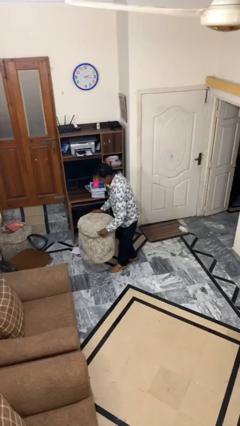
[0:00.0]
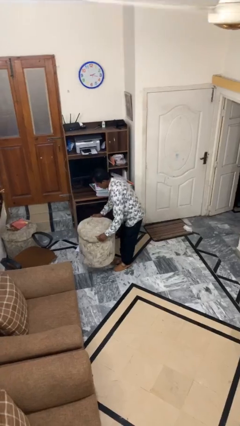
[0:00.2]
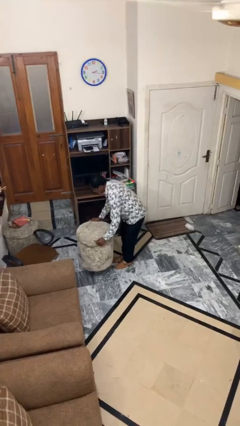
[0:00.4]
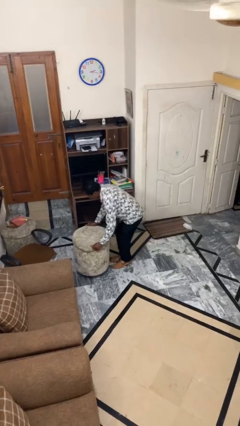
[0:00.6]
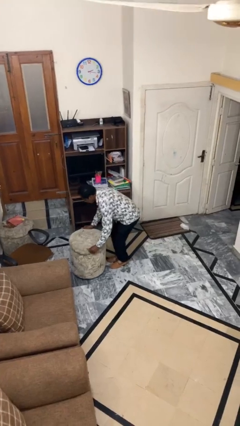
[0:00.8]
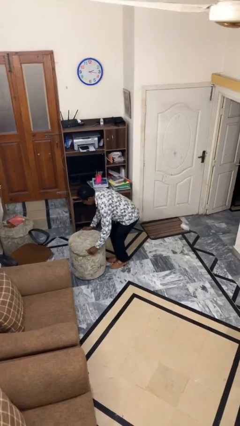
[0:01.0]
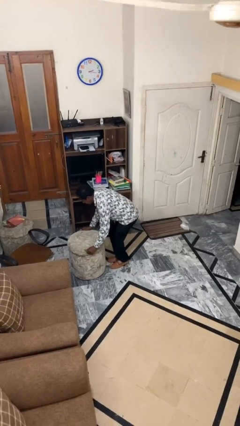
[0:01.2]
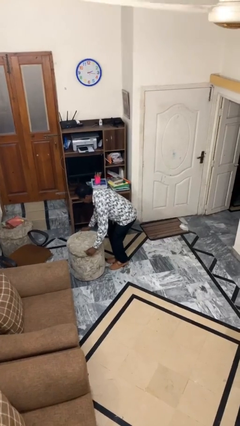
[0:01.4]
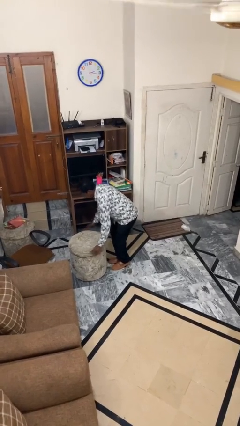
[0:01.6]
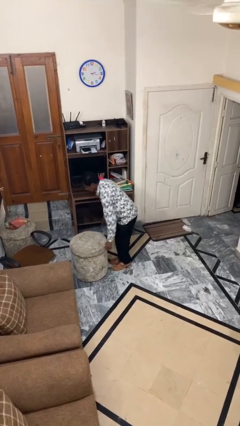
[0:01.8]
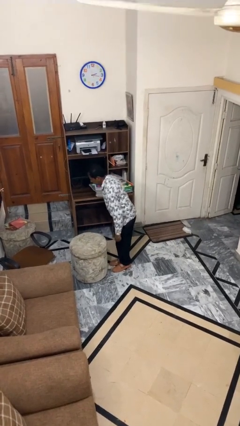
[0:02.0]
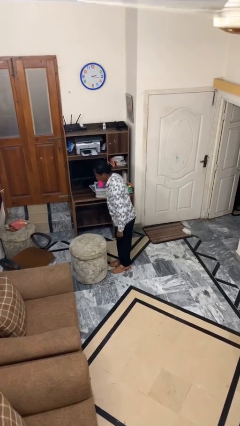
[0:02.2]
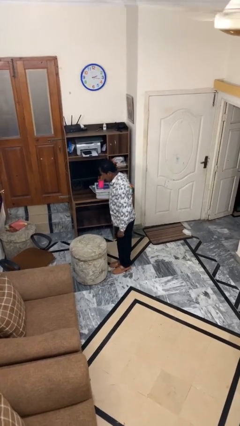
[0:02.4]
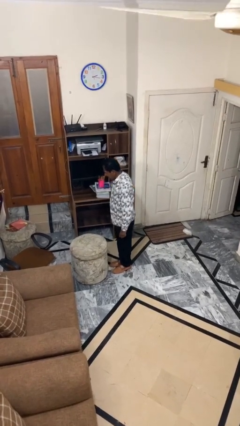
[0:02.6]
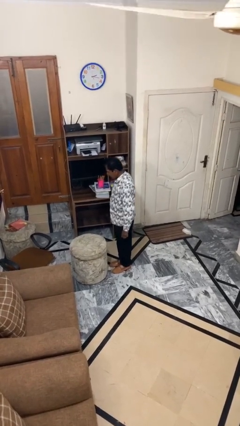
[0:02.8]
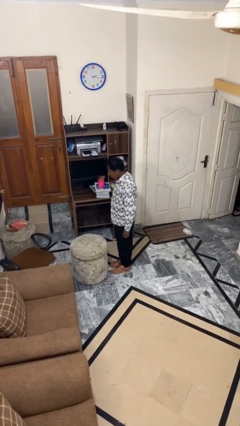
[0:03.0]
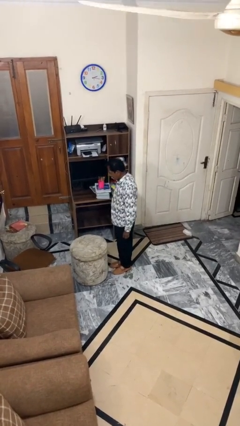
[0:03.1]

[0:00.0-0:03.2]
person puts down object on floor

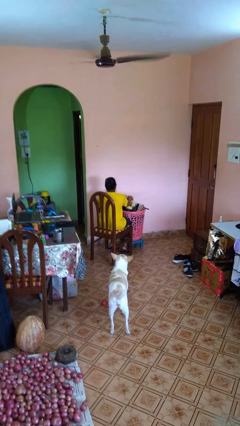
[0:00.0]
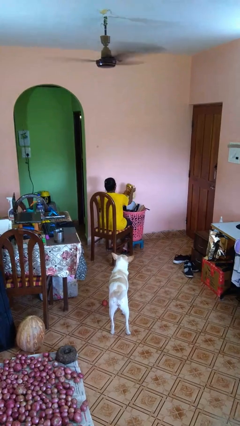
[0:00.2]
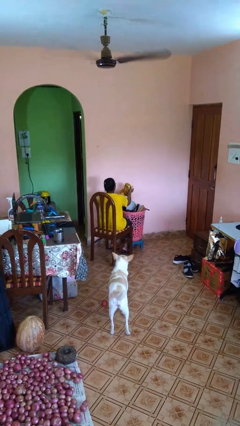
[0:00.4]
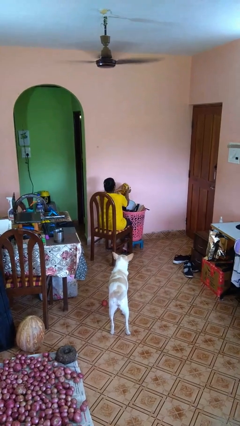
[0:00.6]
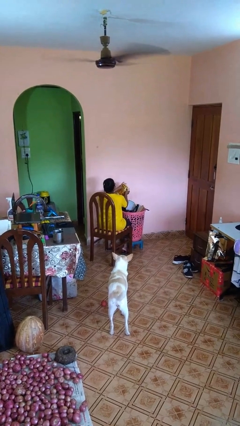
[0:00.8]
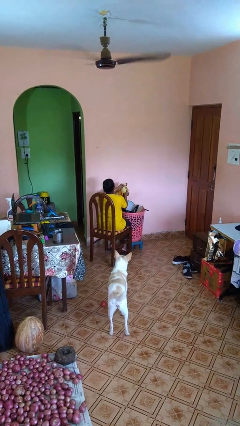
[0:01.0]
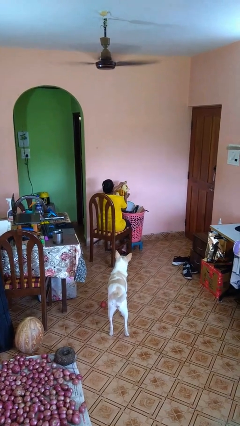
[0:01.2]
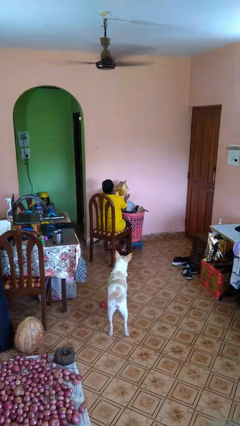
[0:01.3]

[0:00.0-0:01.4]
person takes object from basket

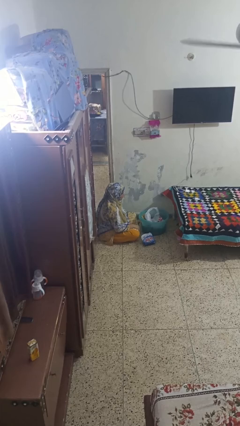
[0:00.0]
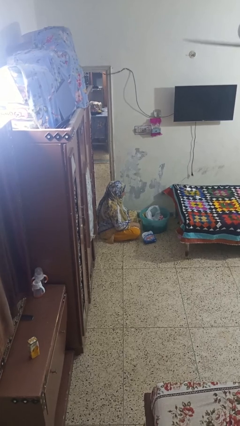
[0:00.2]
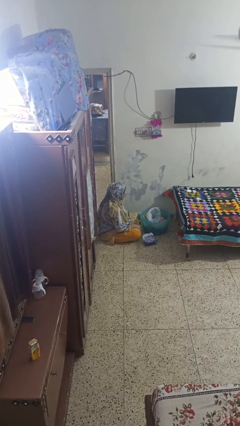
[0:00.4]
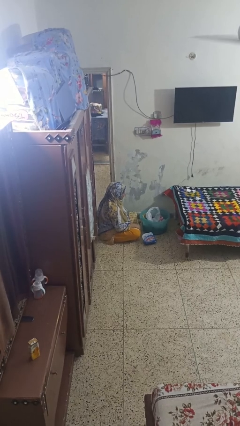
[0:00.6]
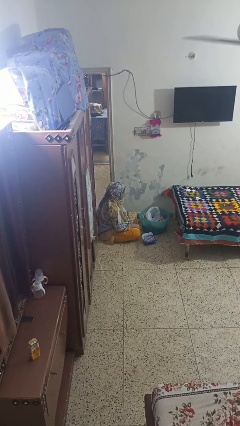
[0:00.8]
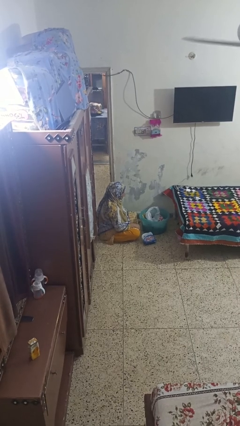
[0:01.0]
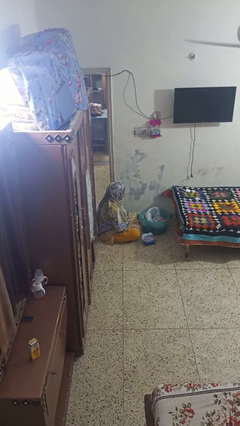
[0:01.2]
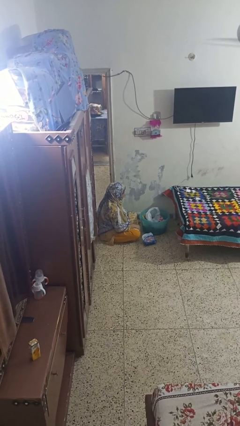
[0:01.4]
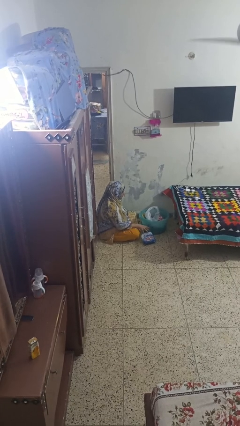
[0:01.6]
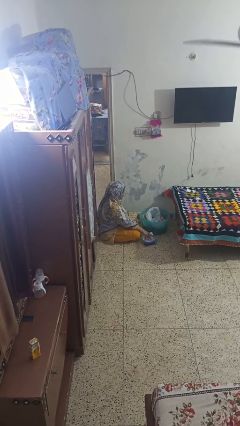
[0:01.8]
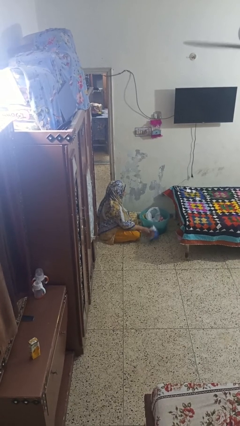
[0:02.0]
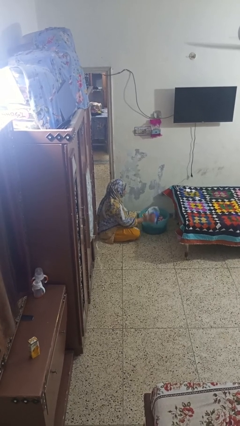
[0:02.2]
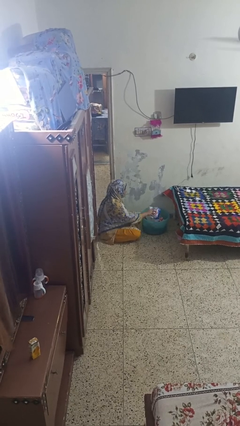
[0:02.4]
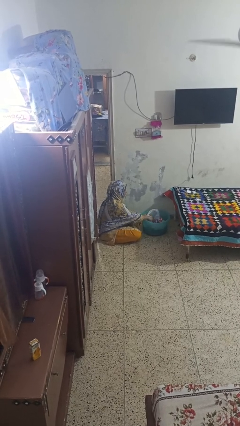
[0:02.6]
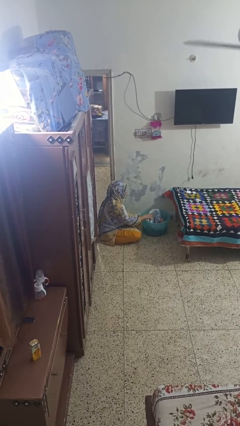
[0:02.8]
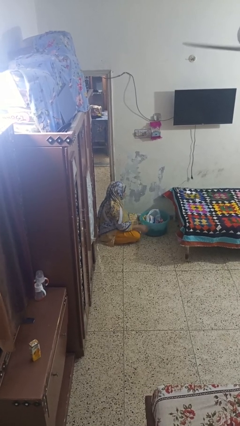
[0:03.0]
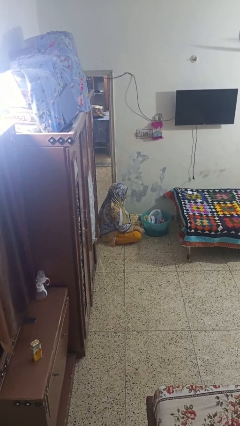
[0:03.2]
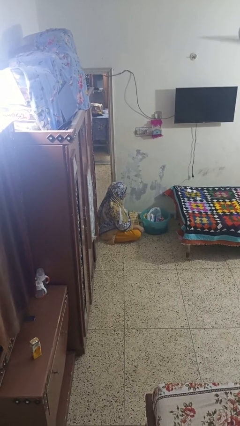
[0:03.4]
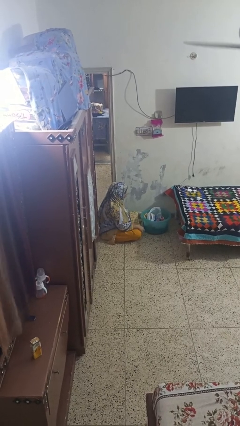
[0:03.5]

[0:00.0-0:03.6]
person puts object into basket

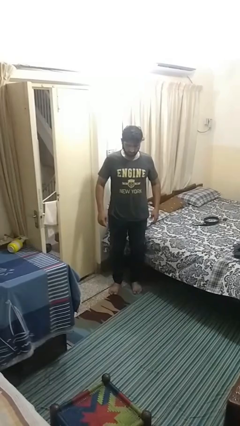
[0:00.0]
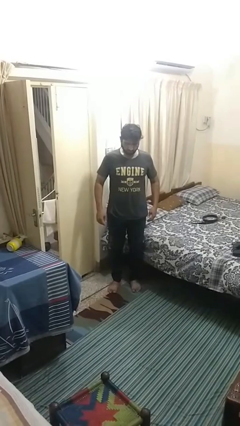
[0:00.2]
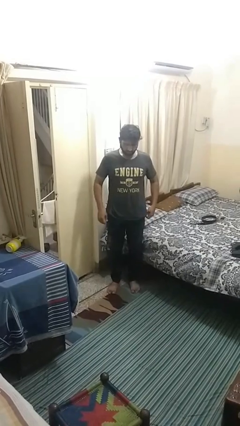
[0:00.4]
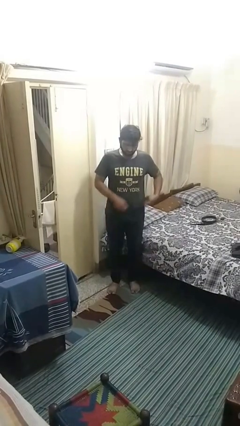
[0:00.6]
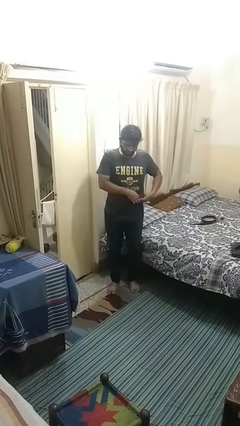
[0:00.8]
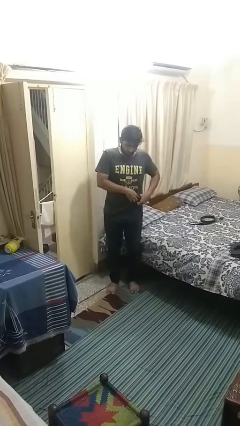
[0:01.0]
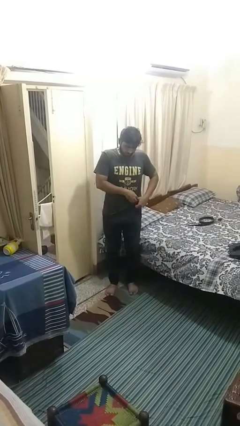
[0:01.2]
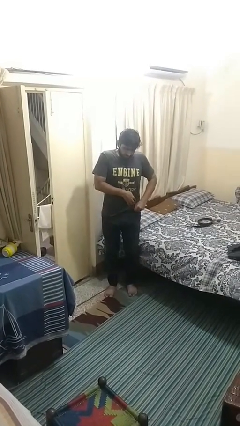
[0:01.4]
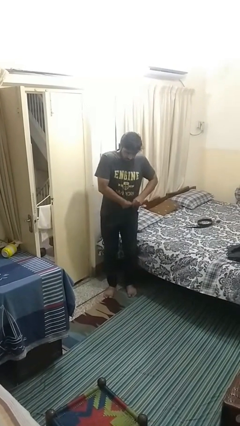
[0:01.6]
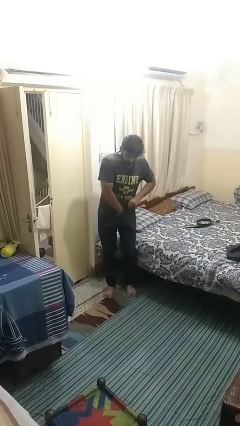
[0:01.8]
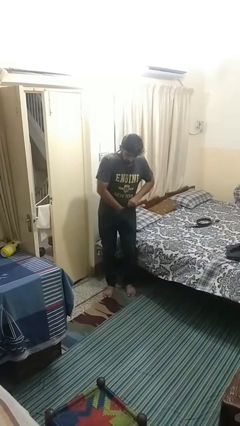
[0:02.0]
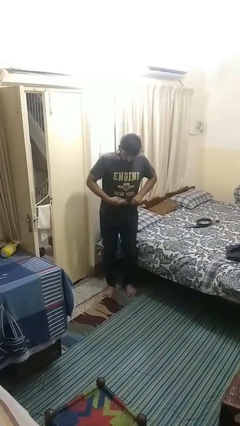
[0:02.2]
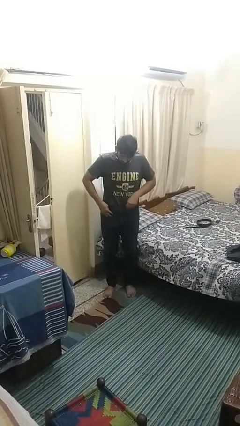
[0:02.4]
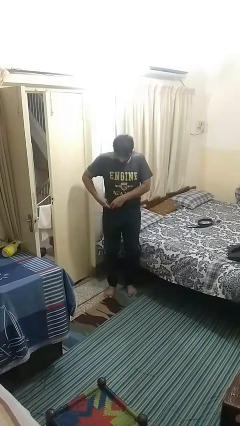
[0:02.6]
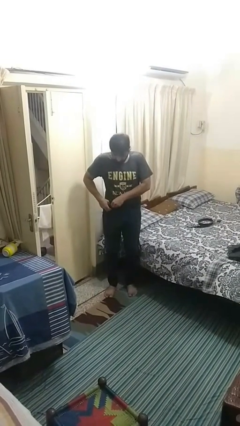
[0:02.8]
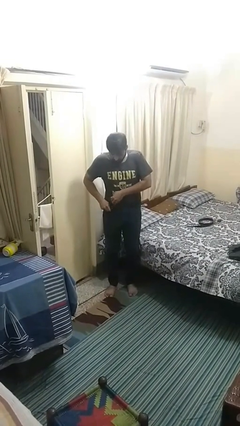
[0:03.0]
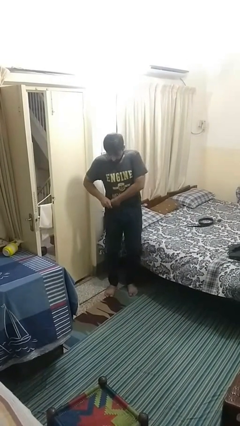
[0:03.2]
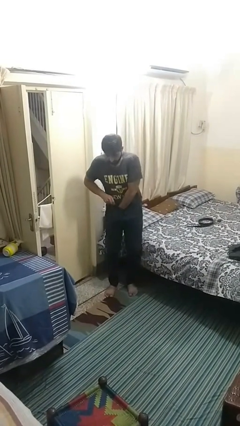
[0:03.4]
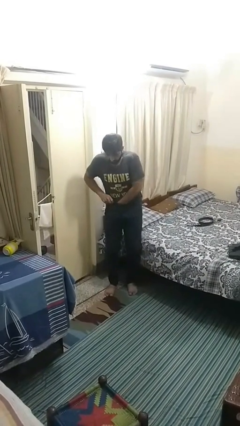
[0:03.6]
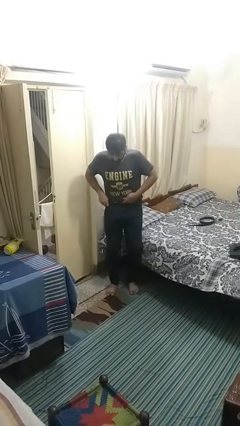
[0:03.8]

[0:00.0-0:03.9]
person tucks in shirt

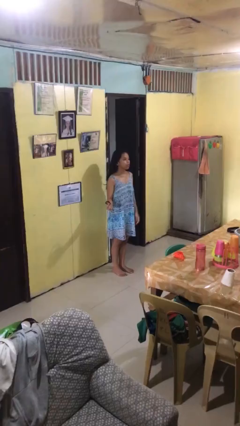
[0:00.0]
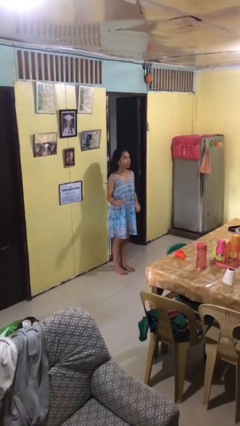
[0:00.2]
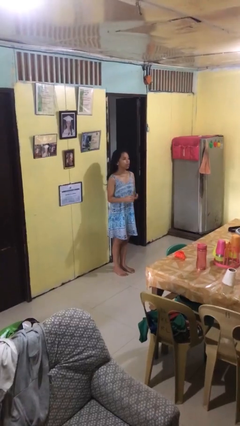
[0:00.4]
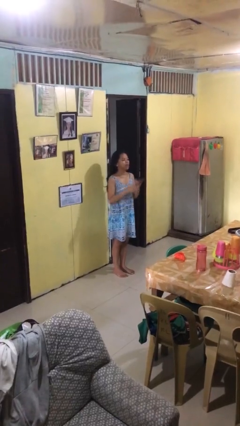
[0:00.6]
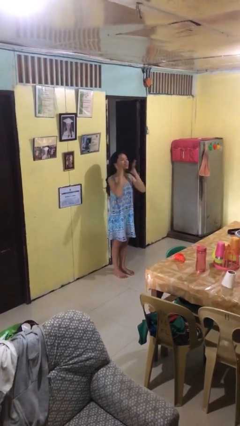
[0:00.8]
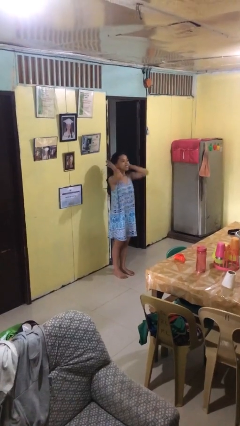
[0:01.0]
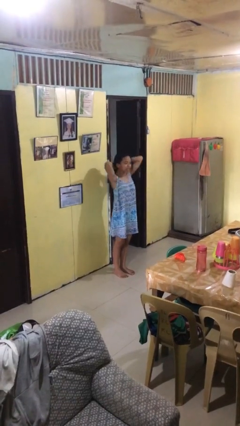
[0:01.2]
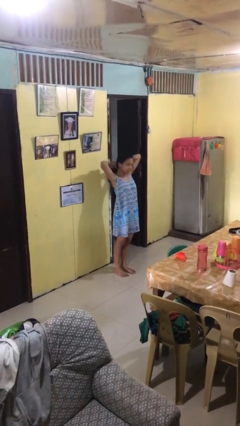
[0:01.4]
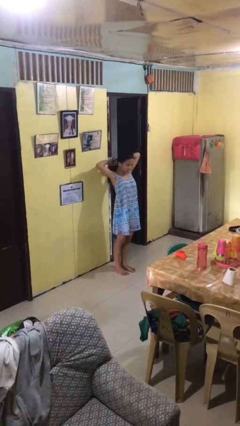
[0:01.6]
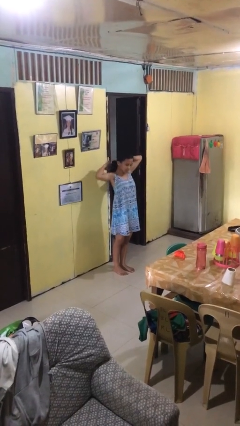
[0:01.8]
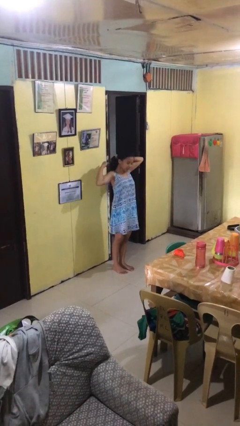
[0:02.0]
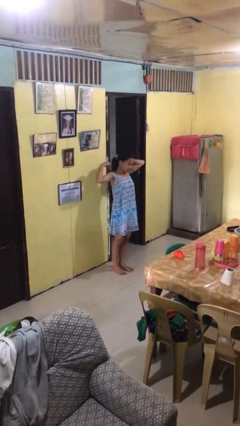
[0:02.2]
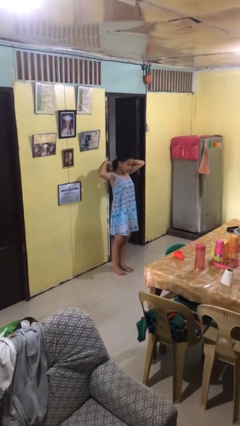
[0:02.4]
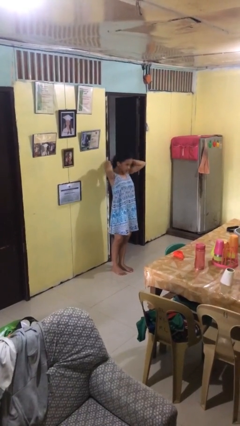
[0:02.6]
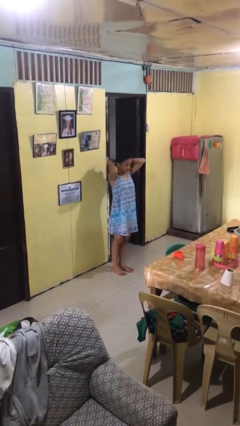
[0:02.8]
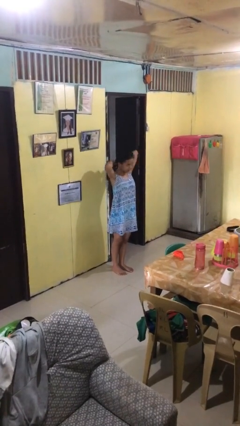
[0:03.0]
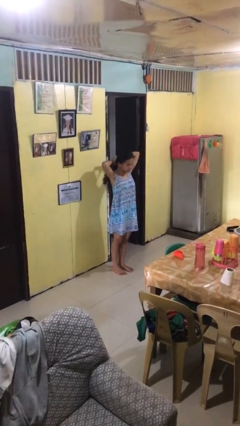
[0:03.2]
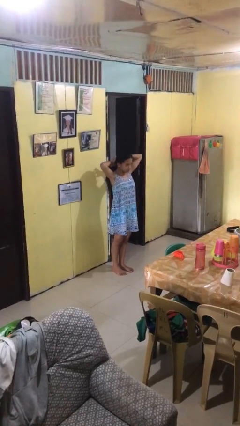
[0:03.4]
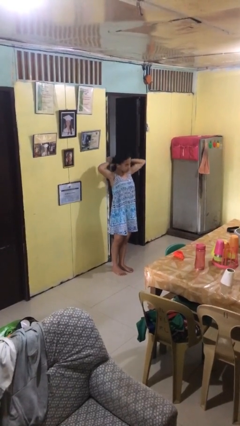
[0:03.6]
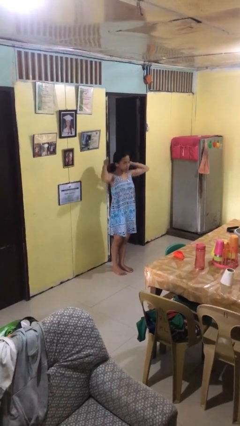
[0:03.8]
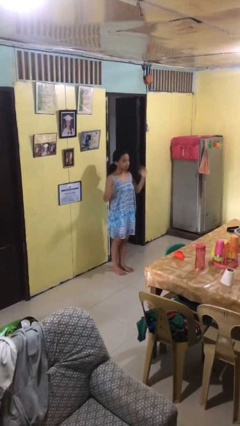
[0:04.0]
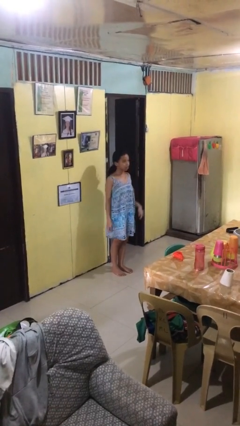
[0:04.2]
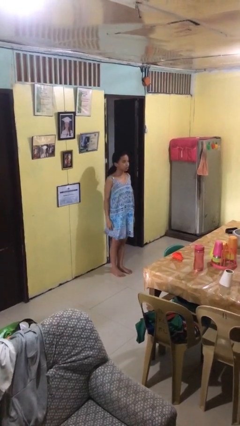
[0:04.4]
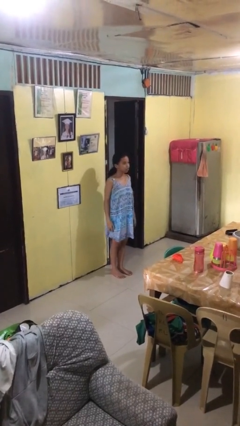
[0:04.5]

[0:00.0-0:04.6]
person puts hair in ponytail

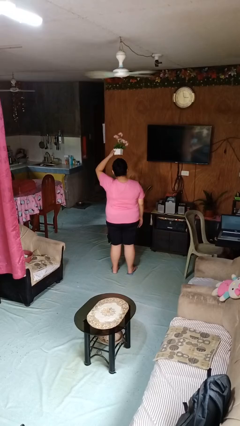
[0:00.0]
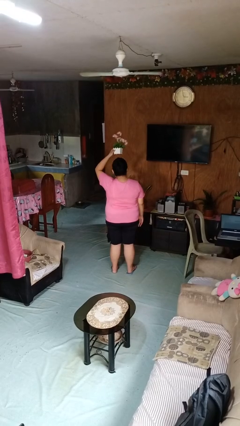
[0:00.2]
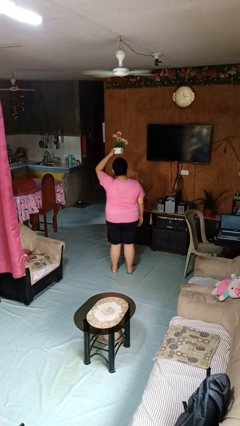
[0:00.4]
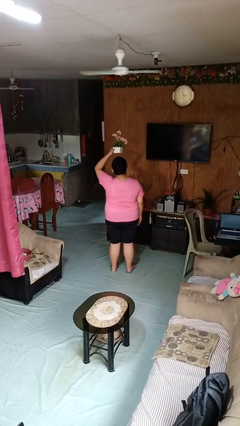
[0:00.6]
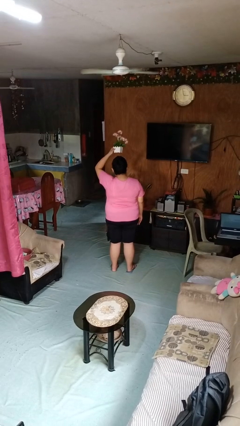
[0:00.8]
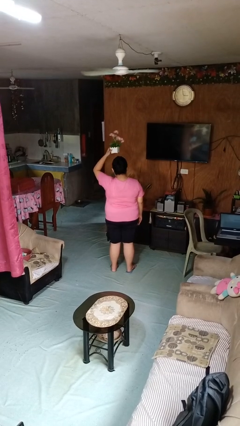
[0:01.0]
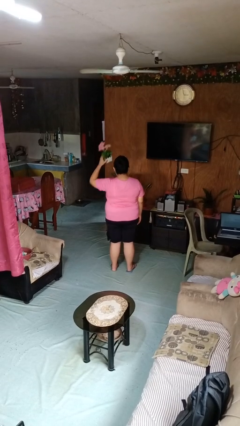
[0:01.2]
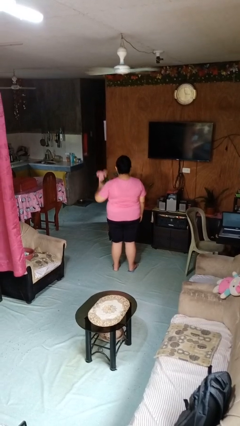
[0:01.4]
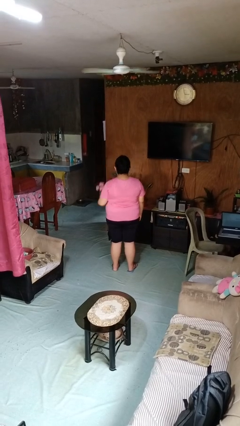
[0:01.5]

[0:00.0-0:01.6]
person holds object above head
